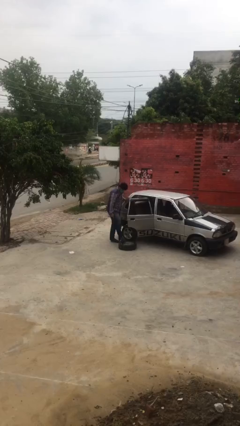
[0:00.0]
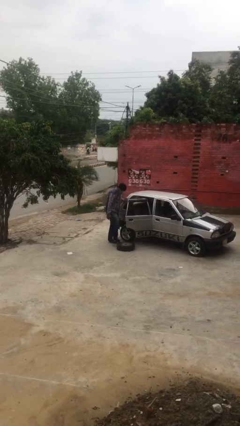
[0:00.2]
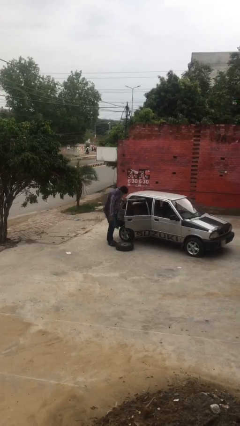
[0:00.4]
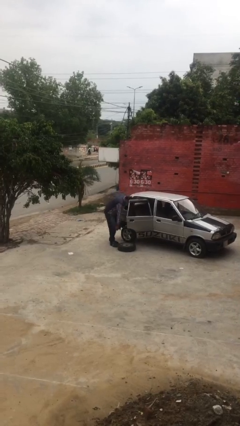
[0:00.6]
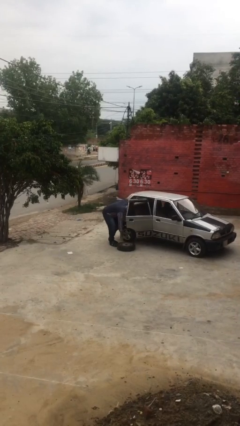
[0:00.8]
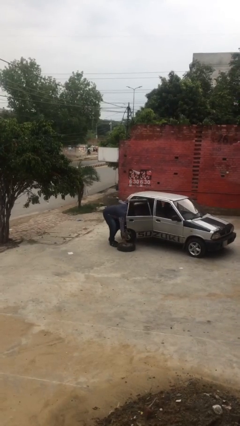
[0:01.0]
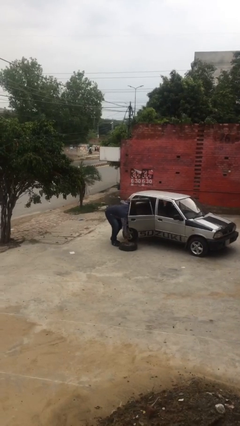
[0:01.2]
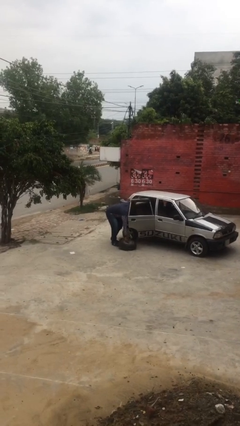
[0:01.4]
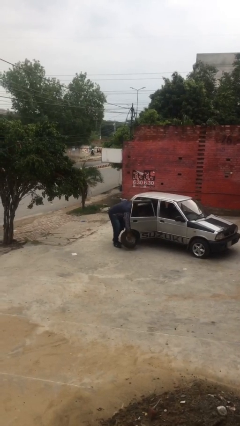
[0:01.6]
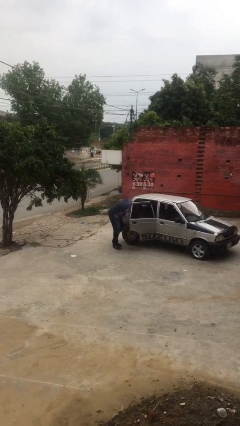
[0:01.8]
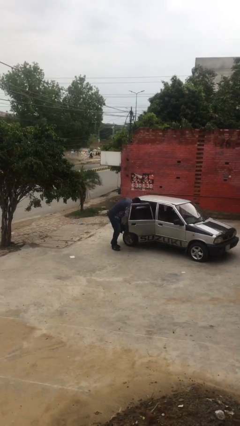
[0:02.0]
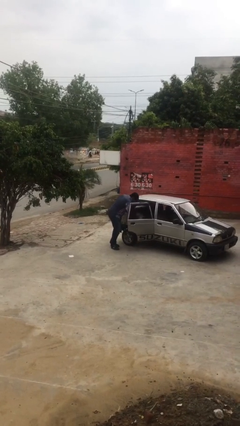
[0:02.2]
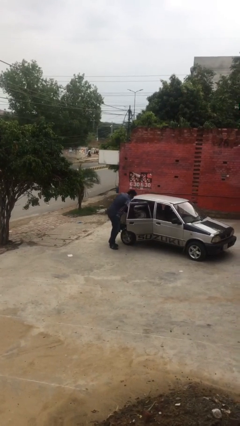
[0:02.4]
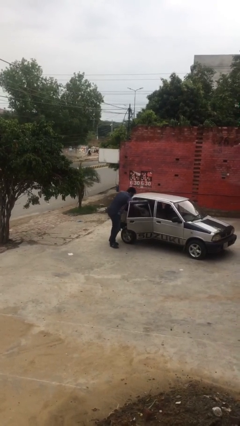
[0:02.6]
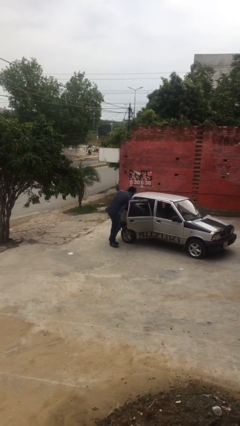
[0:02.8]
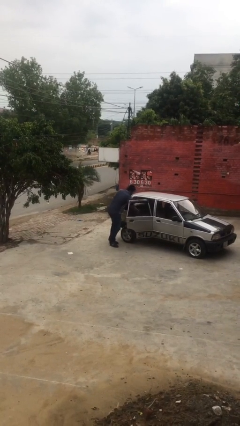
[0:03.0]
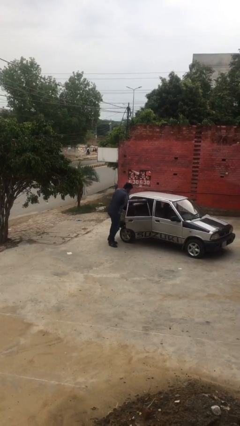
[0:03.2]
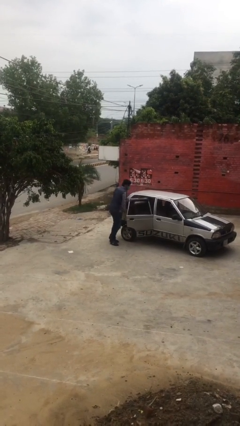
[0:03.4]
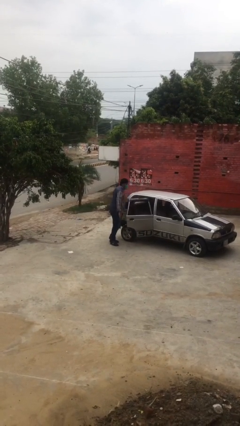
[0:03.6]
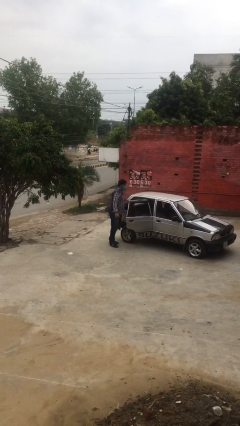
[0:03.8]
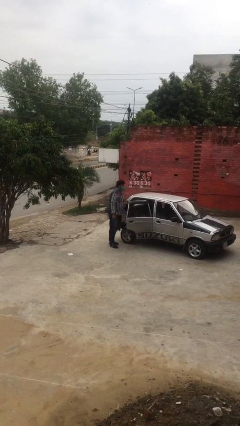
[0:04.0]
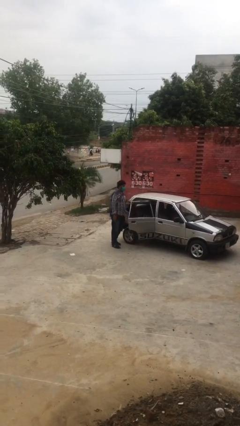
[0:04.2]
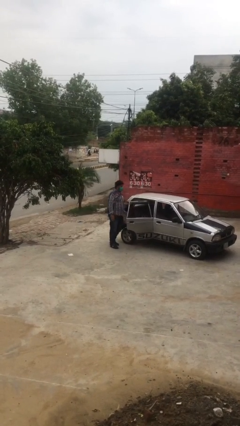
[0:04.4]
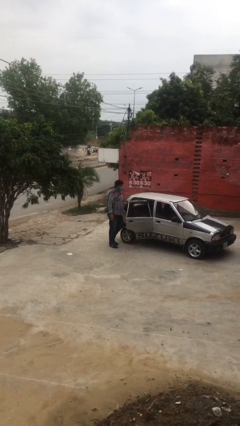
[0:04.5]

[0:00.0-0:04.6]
person loads car

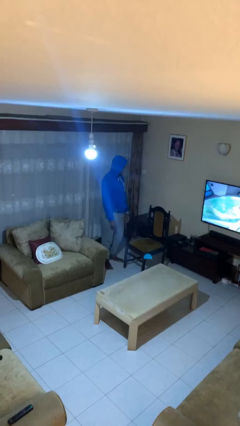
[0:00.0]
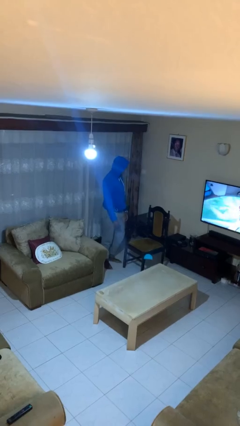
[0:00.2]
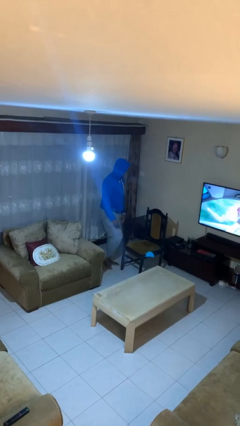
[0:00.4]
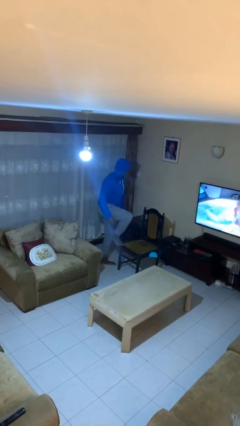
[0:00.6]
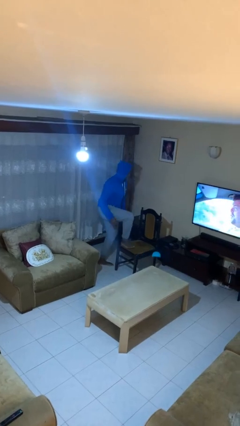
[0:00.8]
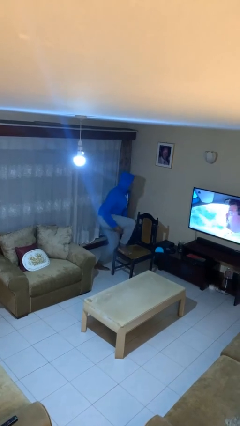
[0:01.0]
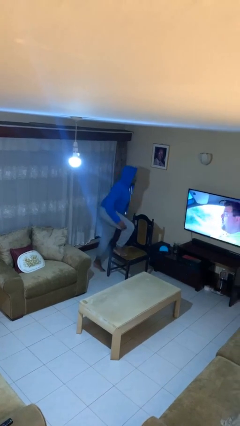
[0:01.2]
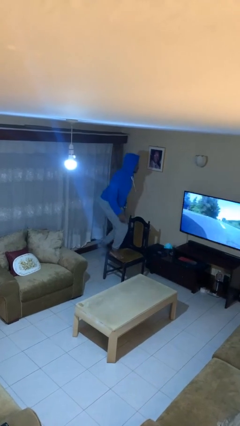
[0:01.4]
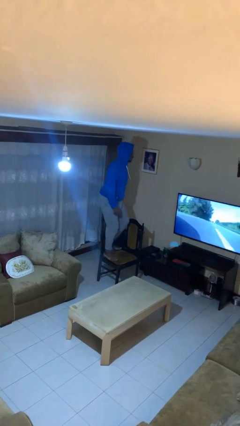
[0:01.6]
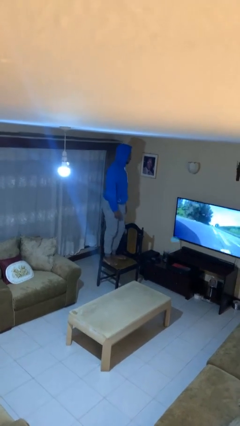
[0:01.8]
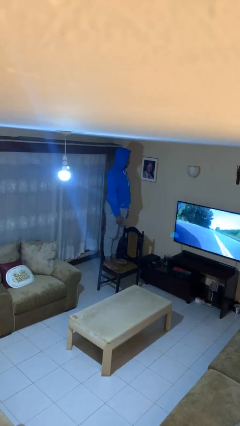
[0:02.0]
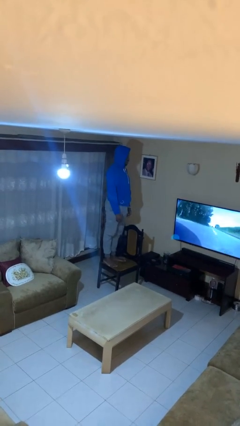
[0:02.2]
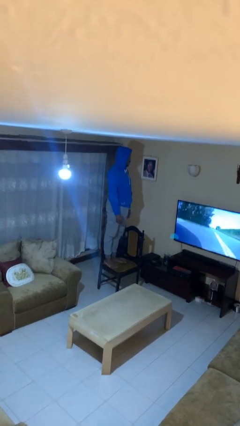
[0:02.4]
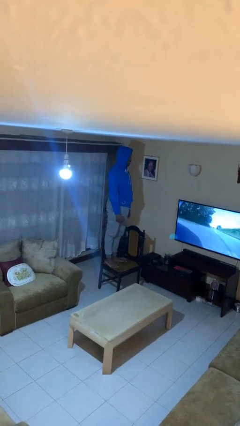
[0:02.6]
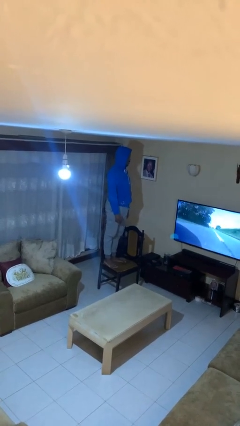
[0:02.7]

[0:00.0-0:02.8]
person climbs on chair

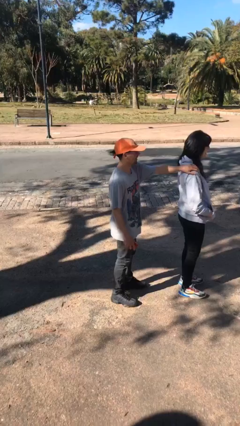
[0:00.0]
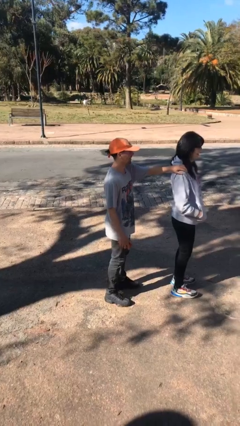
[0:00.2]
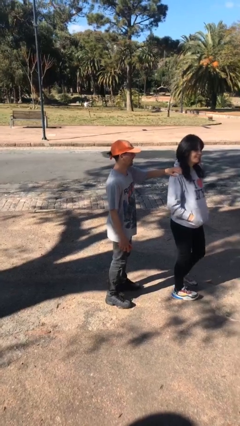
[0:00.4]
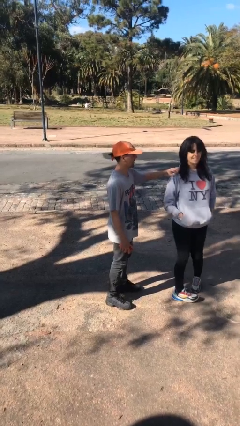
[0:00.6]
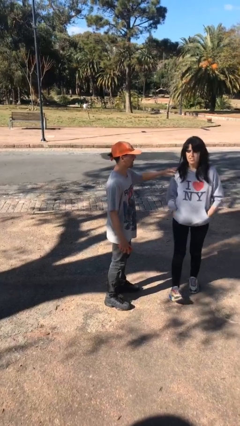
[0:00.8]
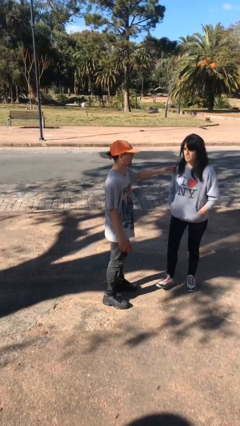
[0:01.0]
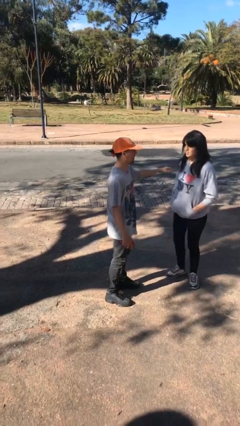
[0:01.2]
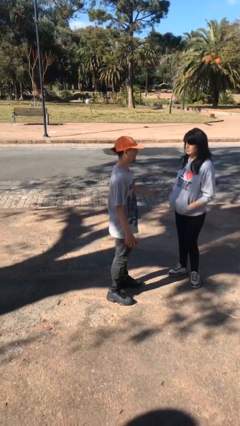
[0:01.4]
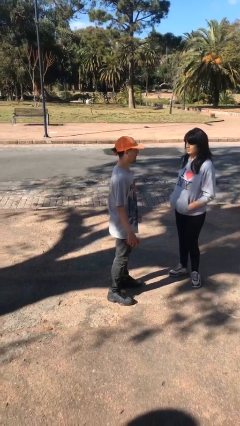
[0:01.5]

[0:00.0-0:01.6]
person spins person around

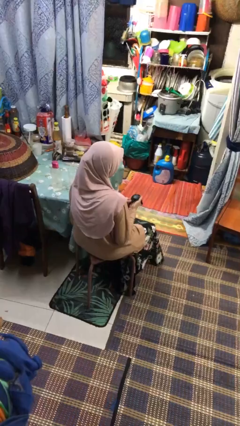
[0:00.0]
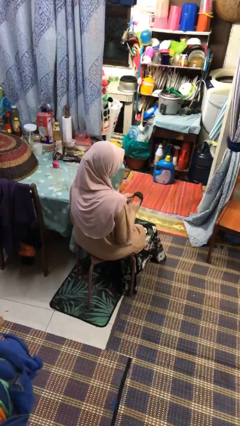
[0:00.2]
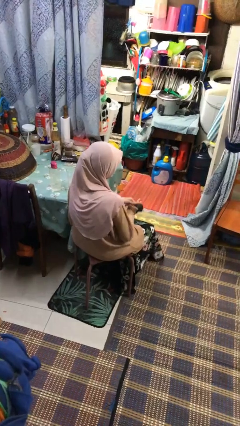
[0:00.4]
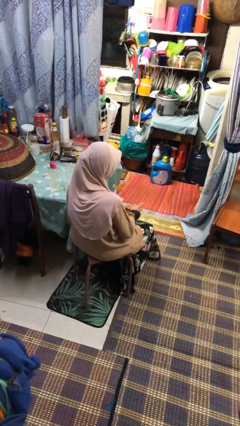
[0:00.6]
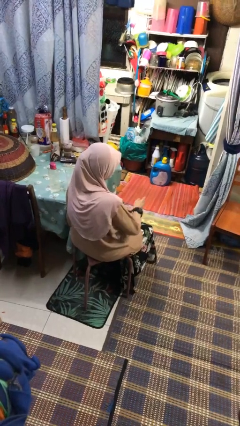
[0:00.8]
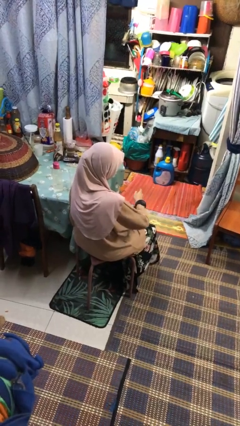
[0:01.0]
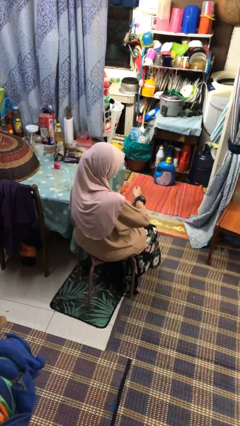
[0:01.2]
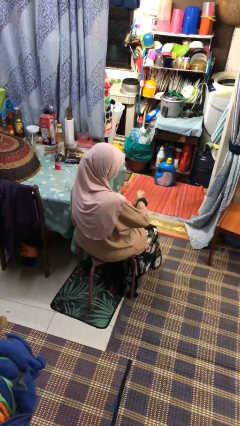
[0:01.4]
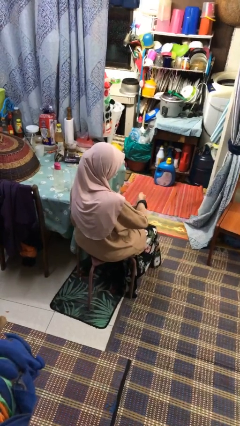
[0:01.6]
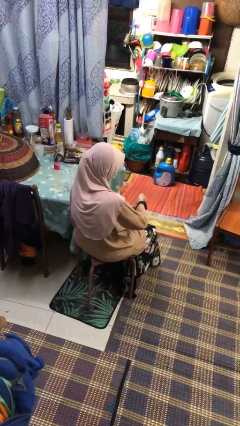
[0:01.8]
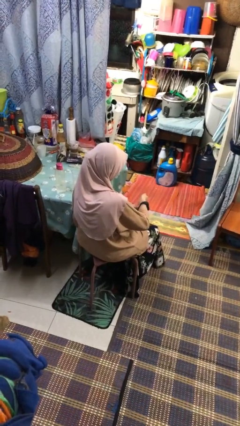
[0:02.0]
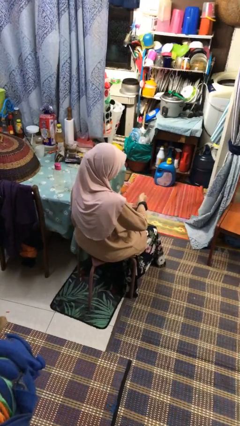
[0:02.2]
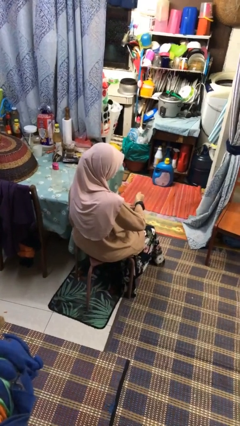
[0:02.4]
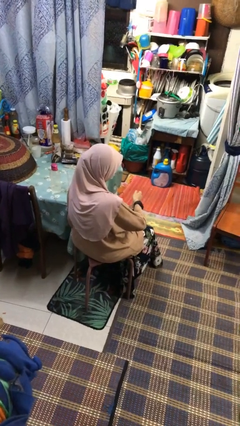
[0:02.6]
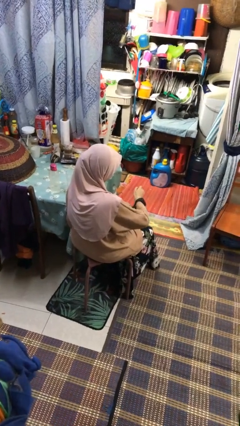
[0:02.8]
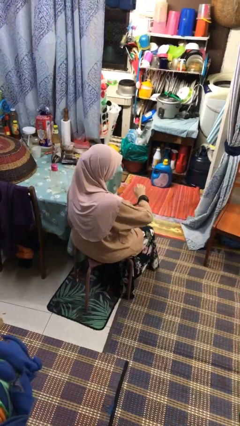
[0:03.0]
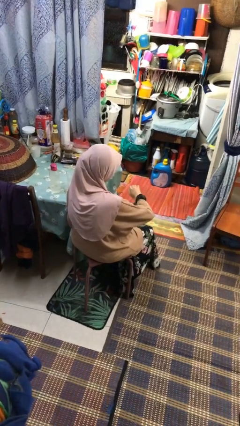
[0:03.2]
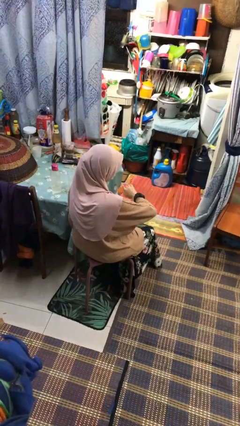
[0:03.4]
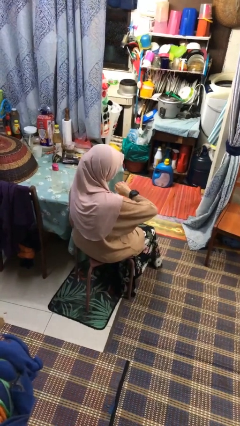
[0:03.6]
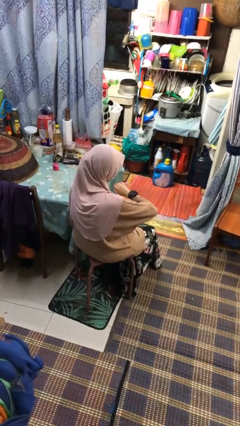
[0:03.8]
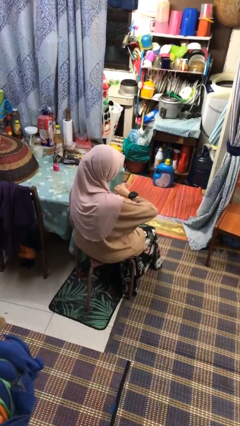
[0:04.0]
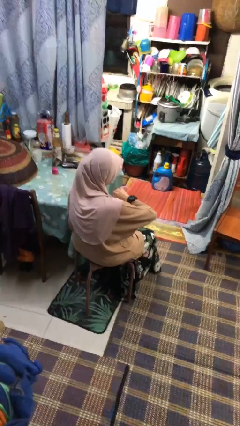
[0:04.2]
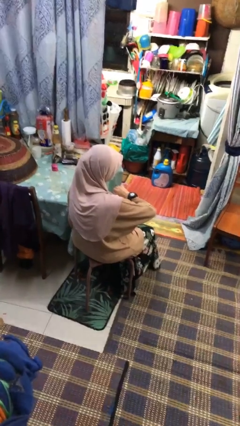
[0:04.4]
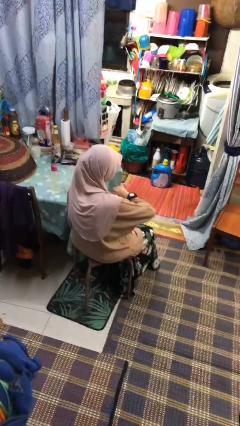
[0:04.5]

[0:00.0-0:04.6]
person puts on wristwatch

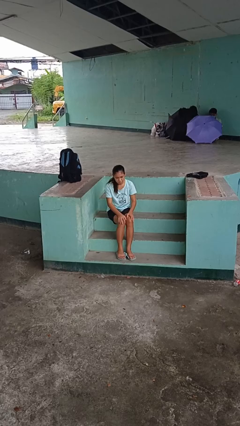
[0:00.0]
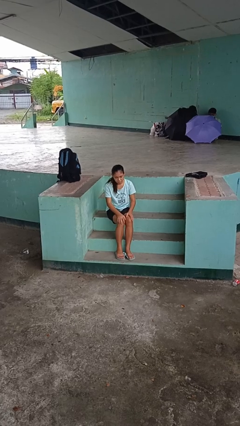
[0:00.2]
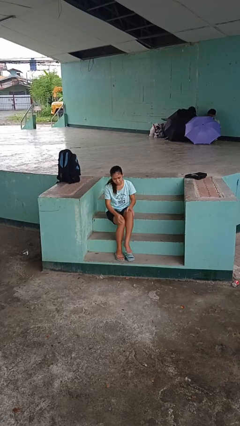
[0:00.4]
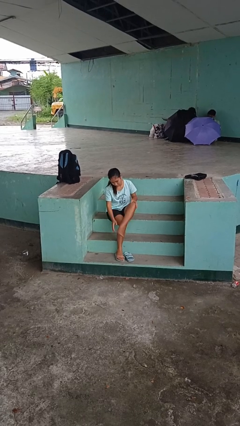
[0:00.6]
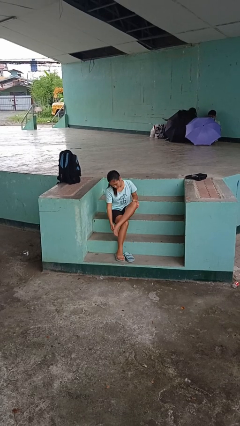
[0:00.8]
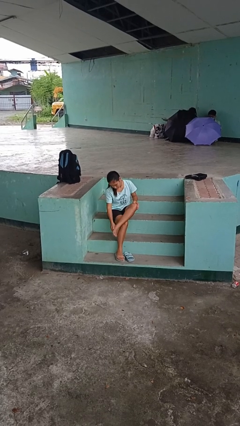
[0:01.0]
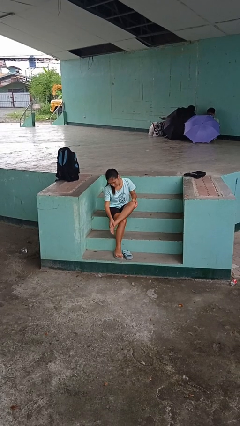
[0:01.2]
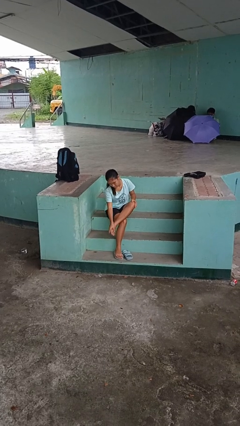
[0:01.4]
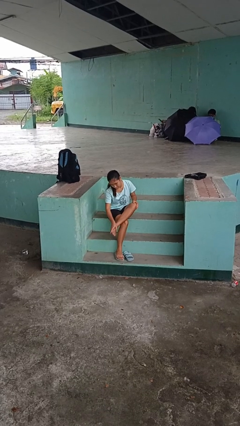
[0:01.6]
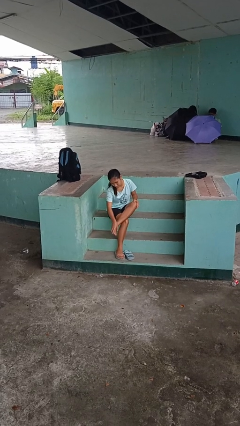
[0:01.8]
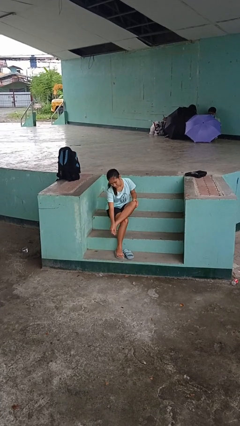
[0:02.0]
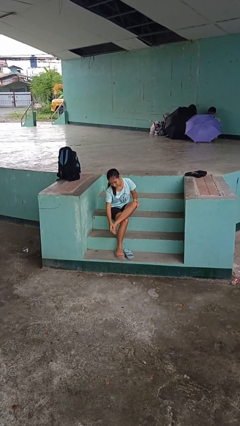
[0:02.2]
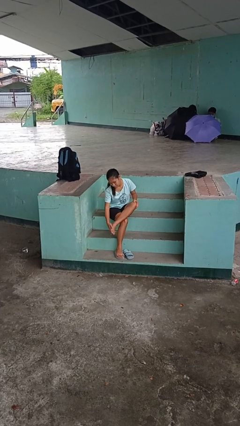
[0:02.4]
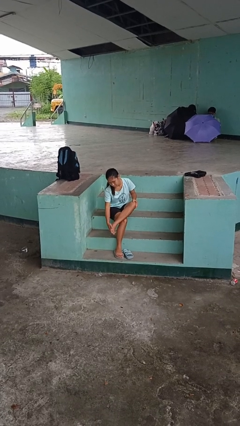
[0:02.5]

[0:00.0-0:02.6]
person rubs foot

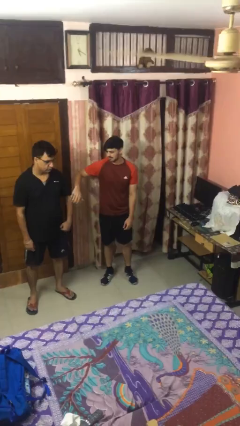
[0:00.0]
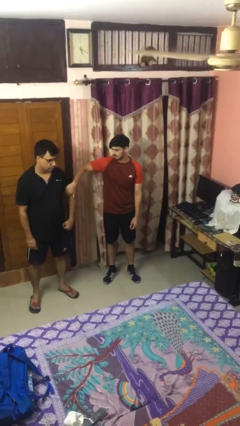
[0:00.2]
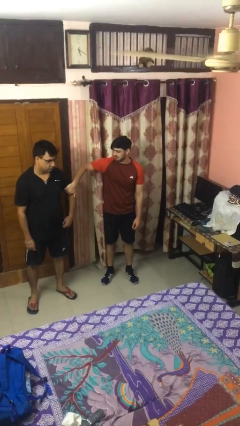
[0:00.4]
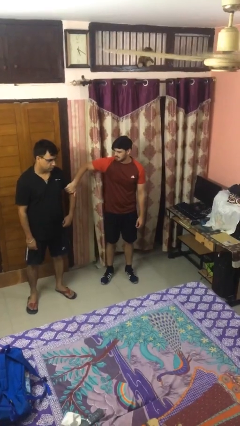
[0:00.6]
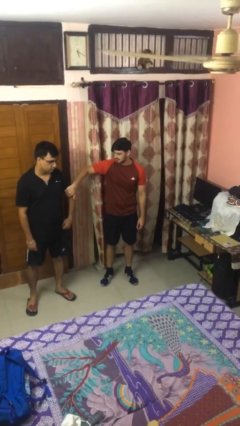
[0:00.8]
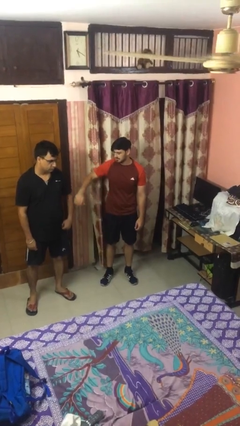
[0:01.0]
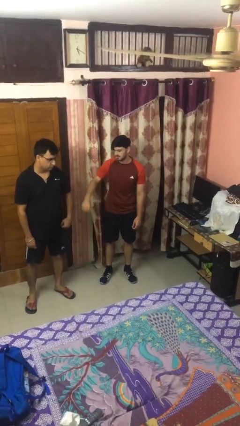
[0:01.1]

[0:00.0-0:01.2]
person grabs person by bicep
